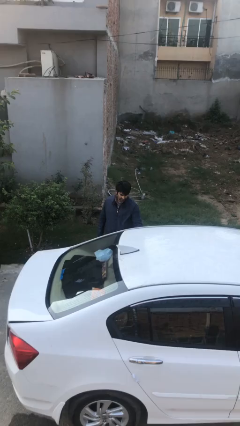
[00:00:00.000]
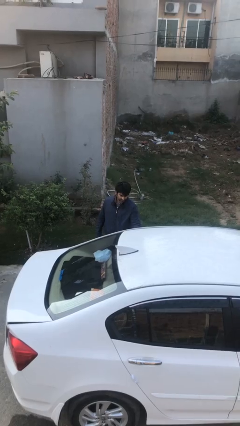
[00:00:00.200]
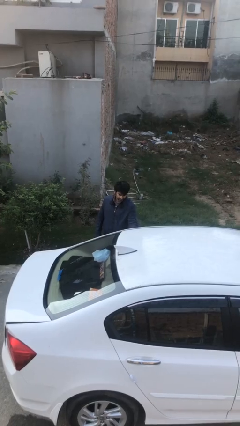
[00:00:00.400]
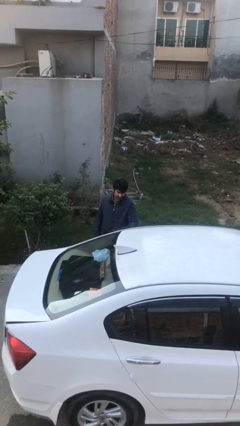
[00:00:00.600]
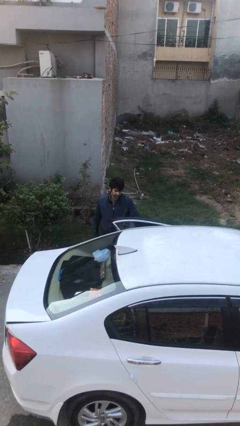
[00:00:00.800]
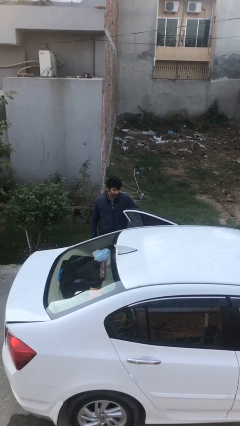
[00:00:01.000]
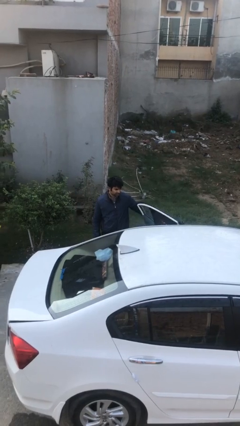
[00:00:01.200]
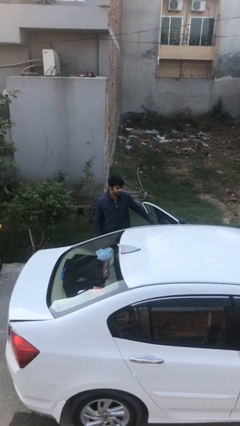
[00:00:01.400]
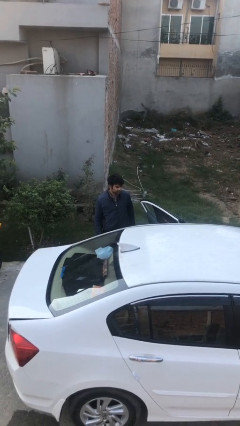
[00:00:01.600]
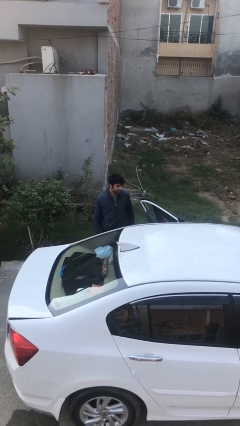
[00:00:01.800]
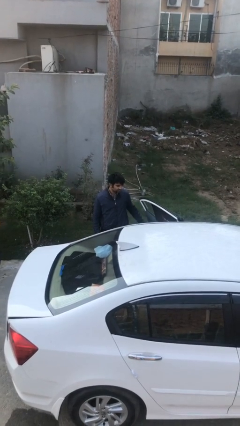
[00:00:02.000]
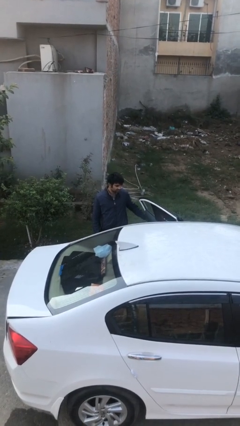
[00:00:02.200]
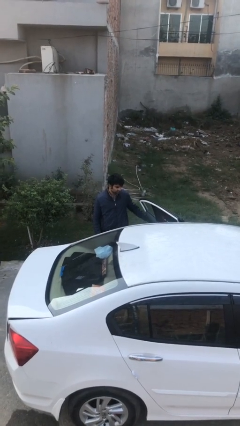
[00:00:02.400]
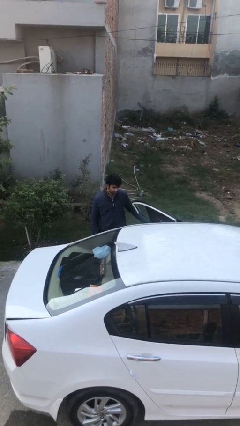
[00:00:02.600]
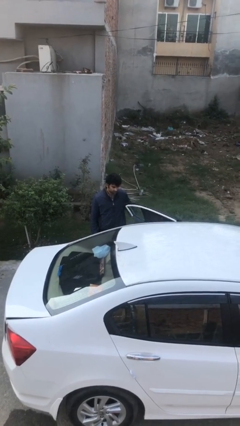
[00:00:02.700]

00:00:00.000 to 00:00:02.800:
person opens car door

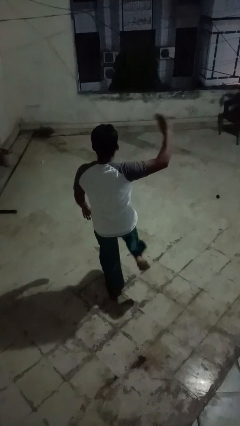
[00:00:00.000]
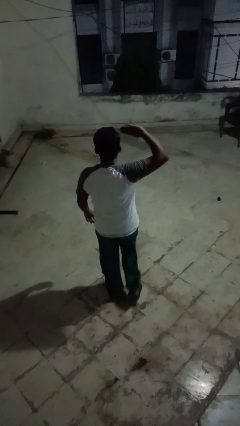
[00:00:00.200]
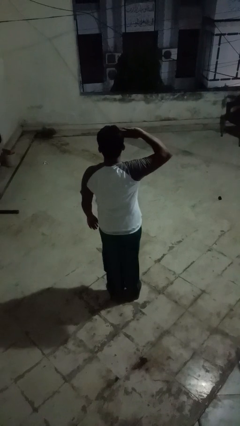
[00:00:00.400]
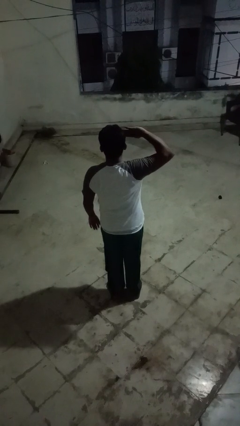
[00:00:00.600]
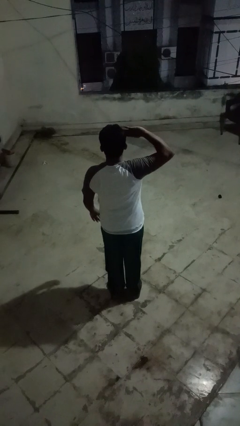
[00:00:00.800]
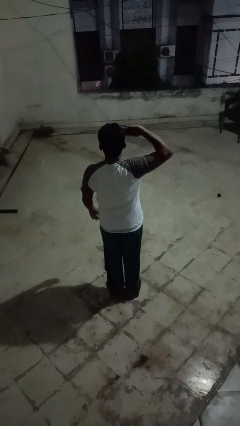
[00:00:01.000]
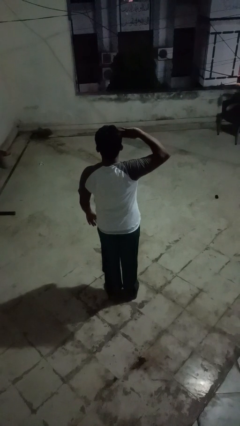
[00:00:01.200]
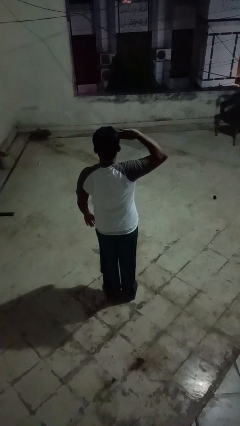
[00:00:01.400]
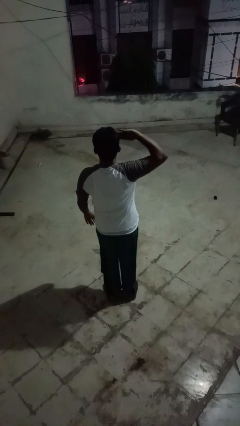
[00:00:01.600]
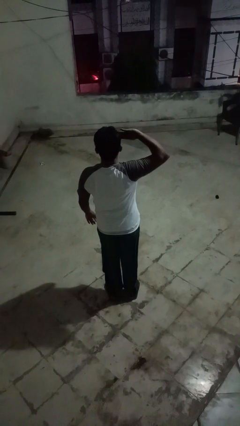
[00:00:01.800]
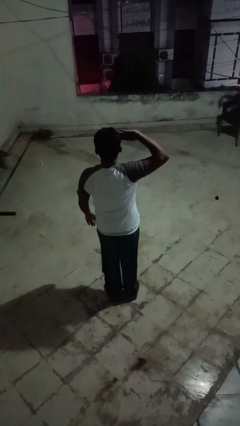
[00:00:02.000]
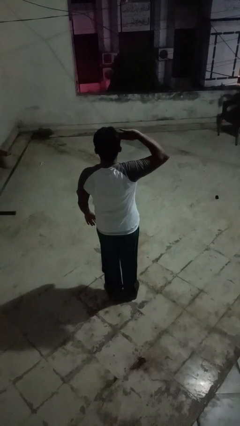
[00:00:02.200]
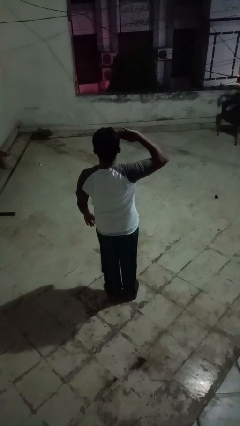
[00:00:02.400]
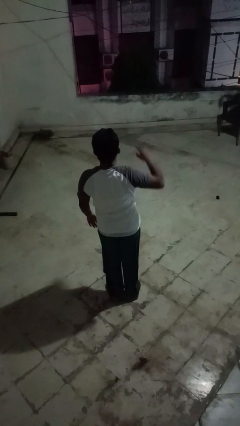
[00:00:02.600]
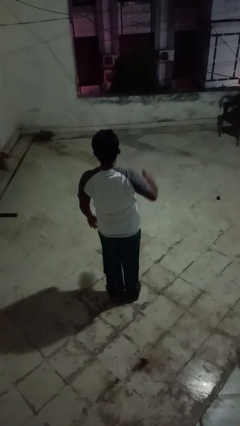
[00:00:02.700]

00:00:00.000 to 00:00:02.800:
person salutes

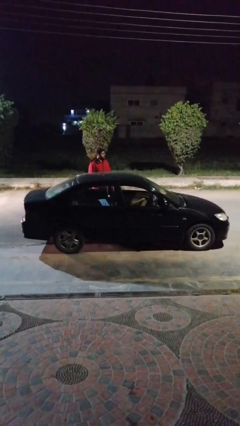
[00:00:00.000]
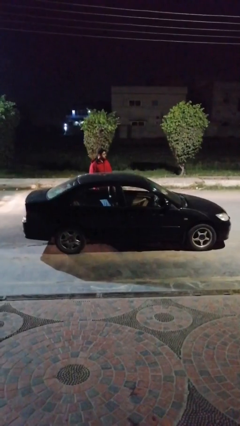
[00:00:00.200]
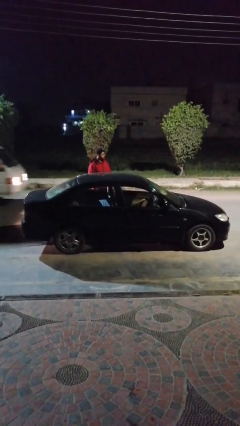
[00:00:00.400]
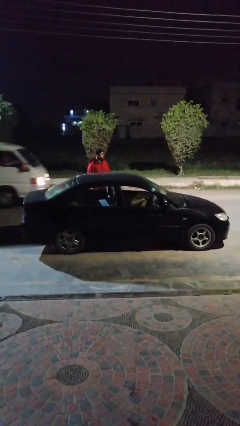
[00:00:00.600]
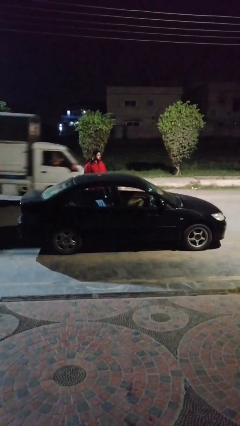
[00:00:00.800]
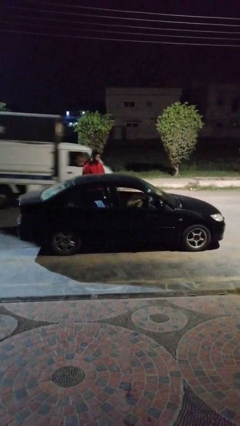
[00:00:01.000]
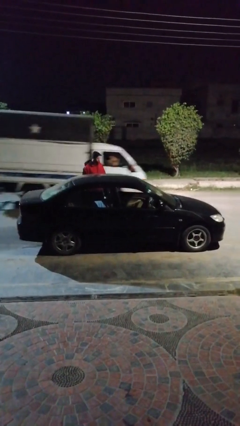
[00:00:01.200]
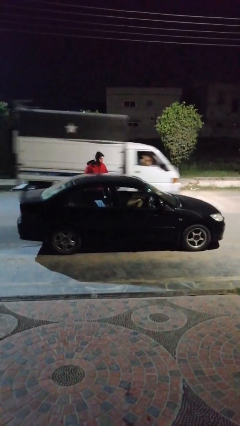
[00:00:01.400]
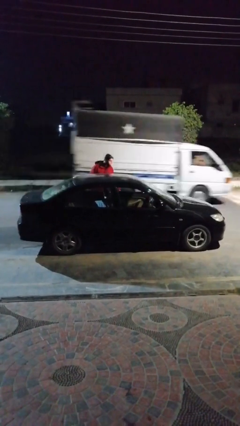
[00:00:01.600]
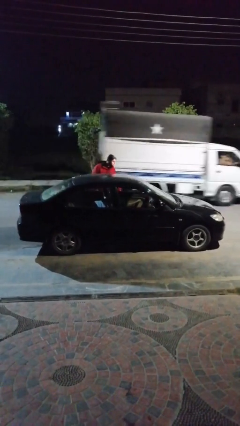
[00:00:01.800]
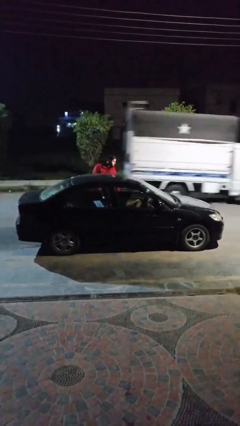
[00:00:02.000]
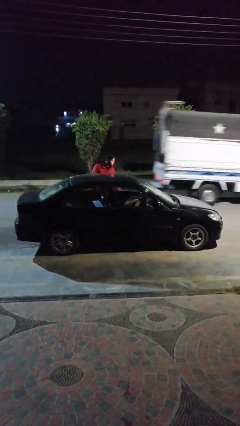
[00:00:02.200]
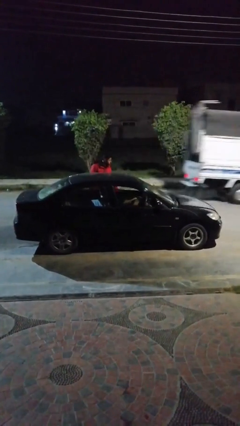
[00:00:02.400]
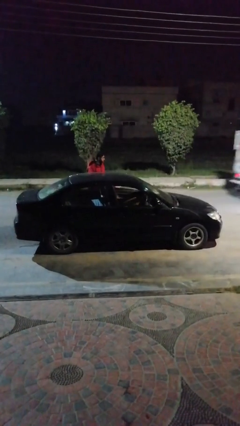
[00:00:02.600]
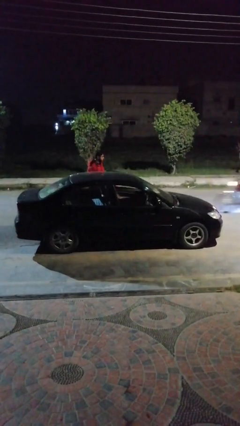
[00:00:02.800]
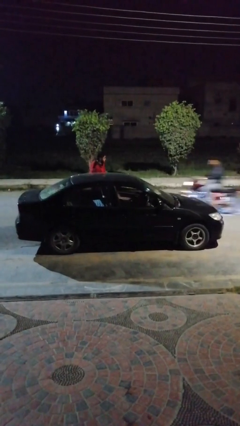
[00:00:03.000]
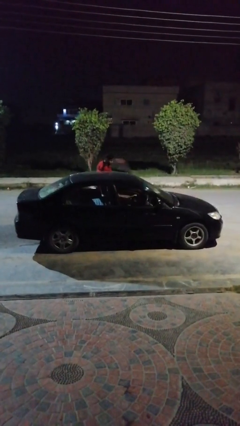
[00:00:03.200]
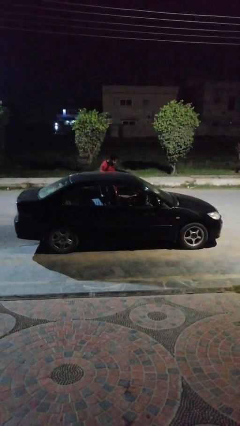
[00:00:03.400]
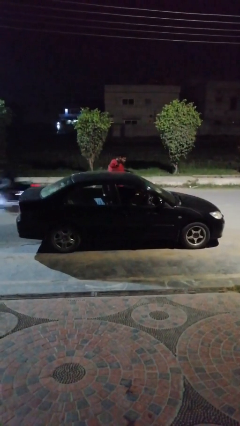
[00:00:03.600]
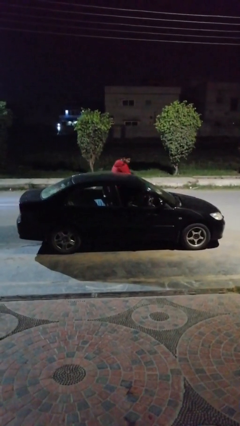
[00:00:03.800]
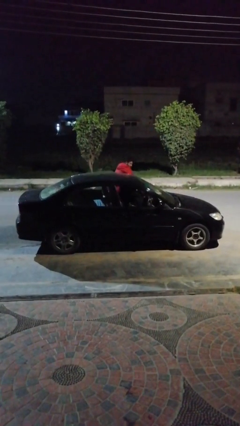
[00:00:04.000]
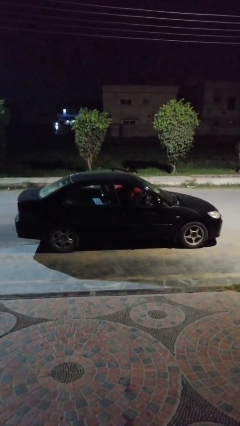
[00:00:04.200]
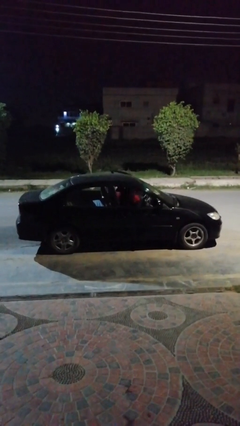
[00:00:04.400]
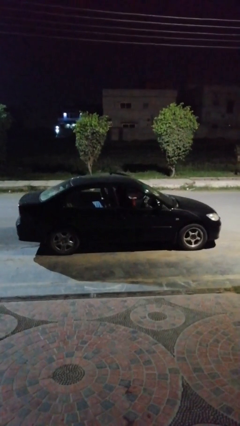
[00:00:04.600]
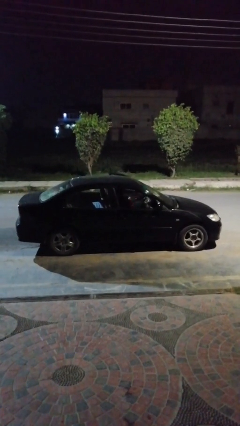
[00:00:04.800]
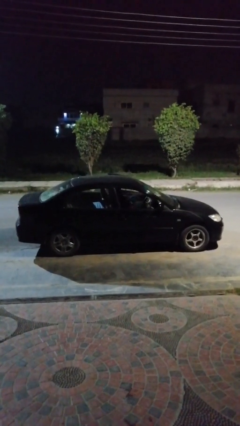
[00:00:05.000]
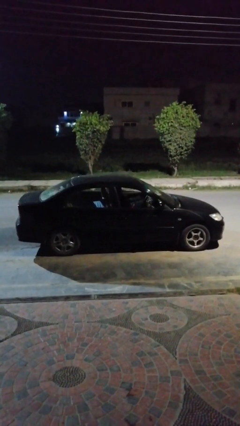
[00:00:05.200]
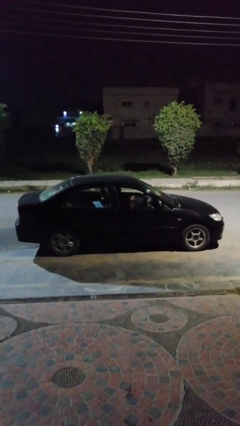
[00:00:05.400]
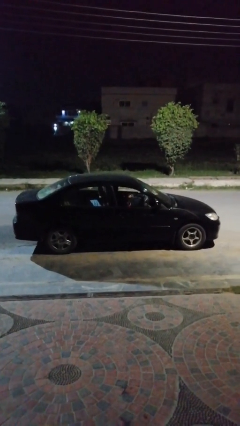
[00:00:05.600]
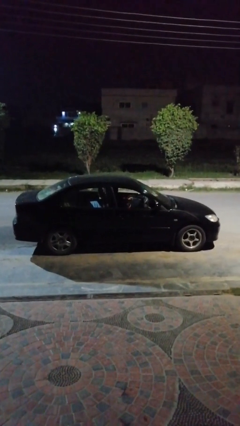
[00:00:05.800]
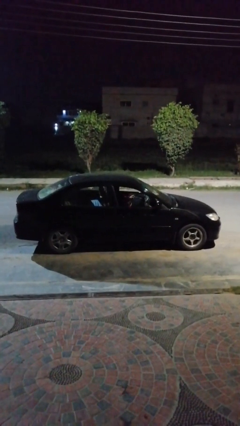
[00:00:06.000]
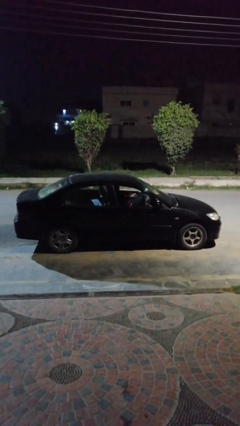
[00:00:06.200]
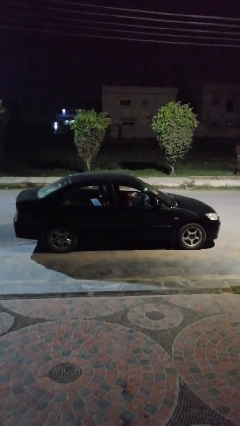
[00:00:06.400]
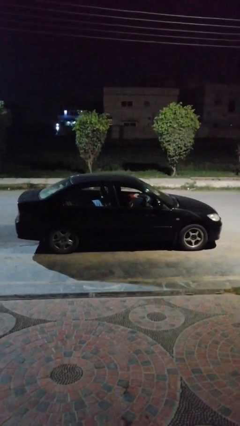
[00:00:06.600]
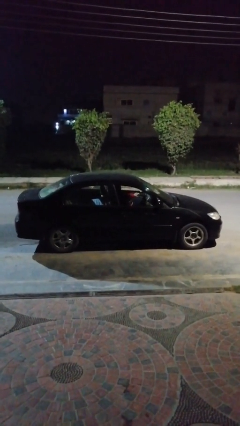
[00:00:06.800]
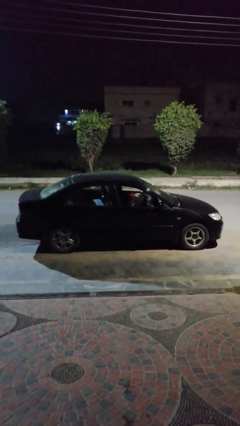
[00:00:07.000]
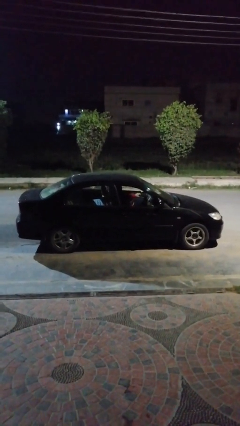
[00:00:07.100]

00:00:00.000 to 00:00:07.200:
car picks up person

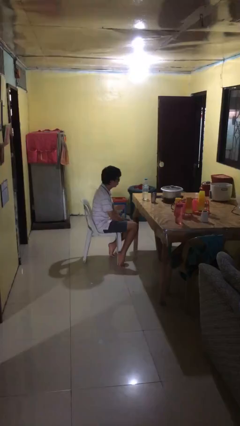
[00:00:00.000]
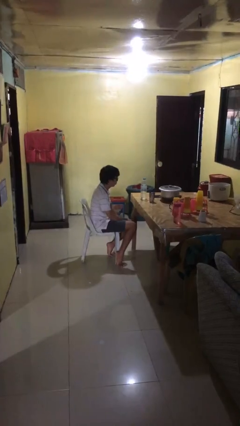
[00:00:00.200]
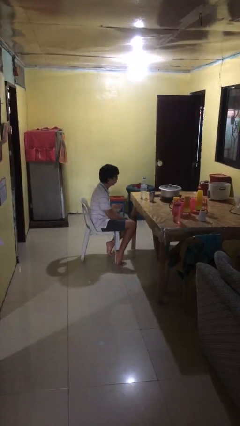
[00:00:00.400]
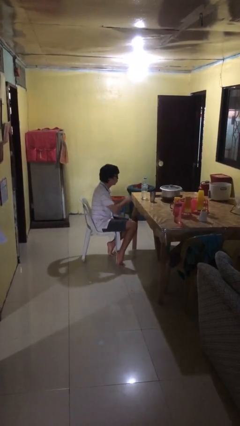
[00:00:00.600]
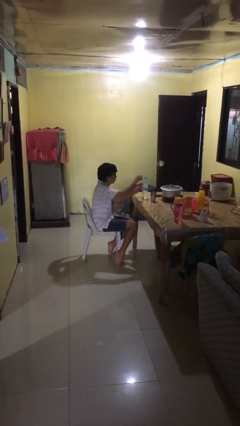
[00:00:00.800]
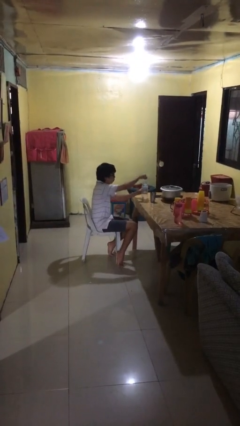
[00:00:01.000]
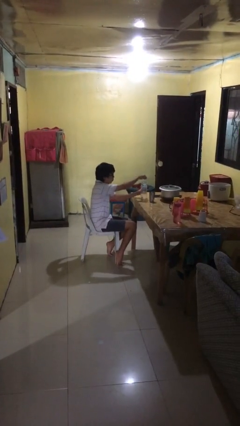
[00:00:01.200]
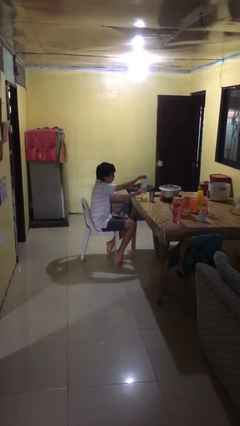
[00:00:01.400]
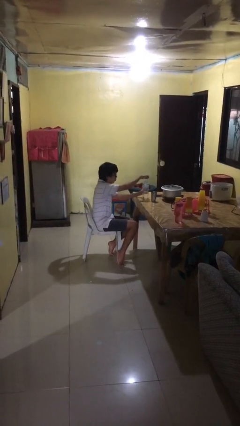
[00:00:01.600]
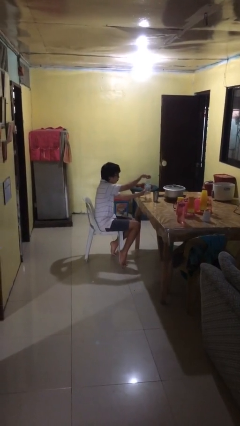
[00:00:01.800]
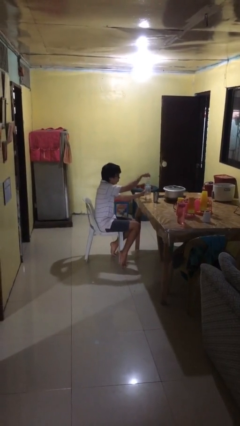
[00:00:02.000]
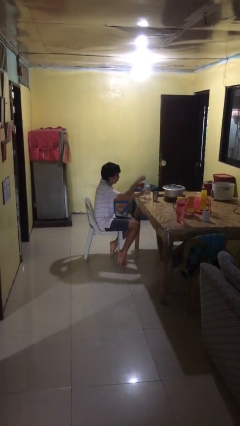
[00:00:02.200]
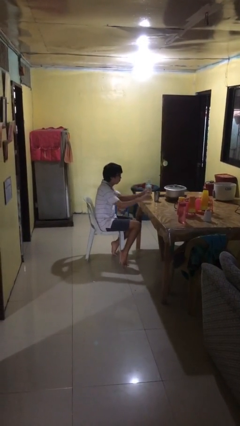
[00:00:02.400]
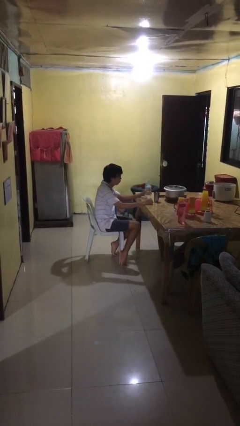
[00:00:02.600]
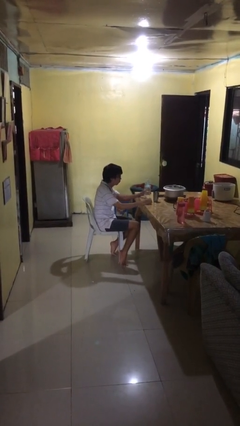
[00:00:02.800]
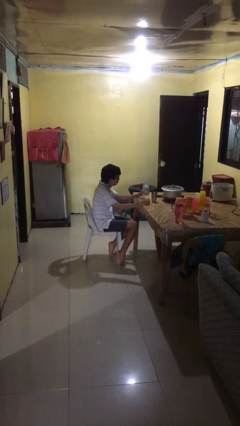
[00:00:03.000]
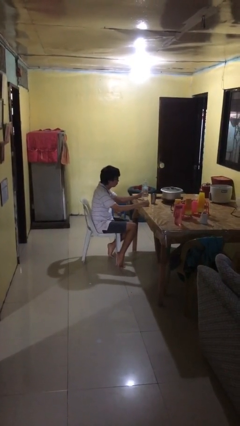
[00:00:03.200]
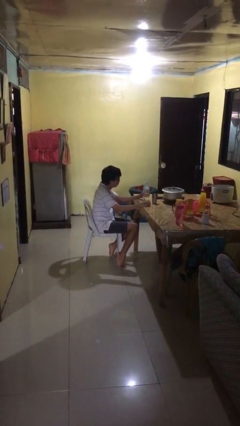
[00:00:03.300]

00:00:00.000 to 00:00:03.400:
person unscrews lid from bottle

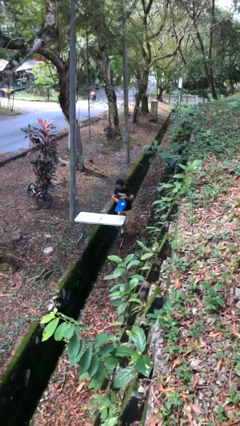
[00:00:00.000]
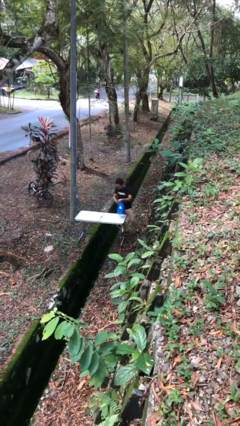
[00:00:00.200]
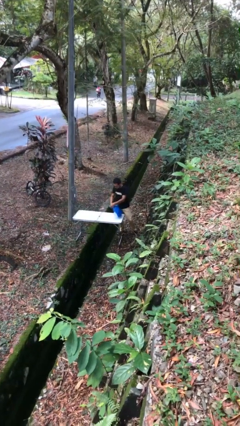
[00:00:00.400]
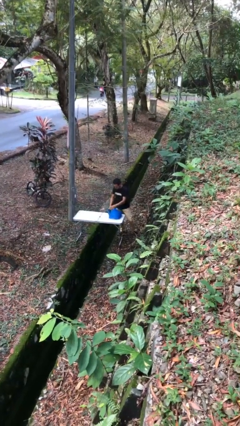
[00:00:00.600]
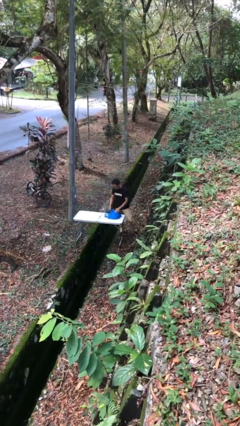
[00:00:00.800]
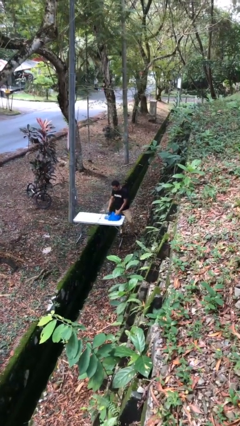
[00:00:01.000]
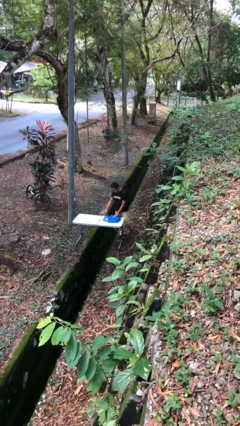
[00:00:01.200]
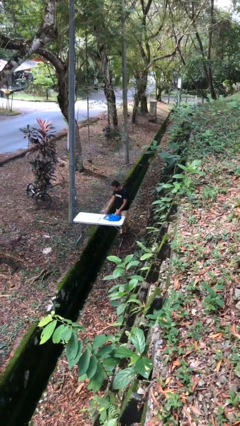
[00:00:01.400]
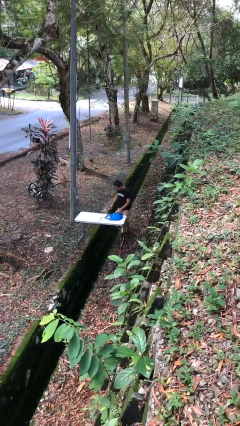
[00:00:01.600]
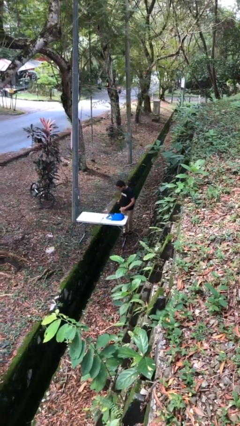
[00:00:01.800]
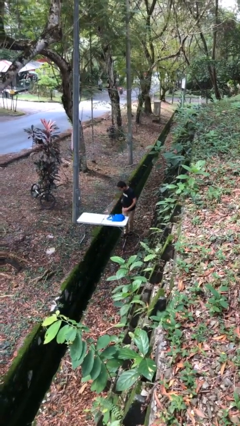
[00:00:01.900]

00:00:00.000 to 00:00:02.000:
person puts down object on table
